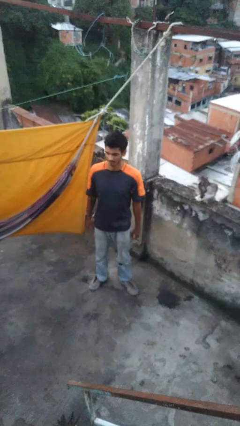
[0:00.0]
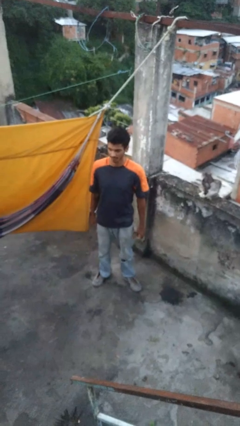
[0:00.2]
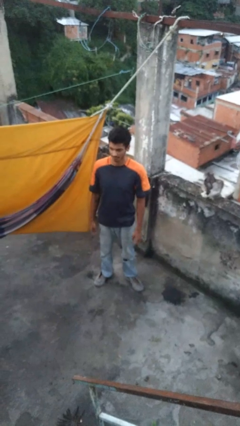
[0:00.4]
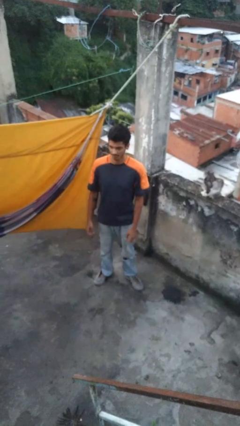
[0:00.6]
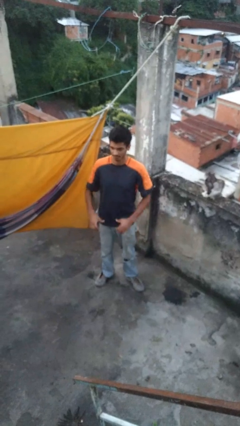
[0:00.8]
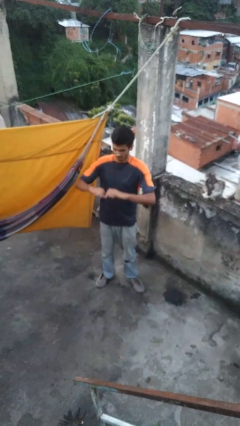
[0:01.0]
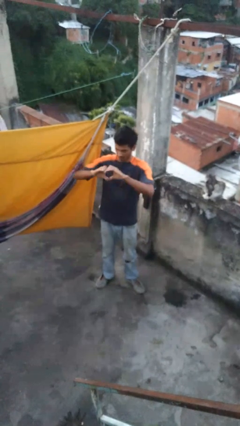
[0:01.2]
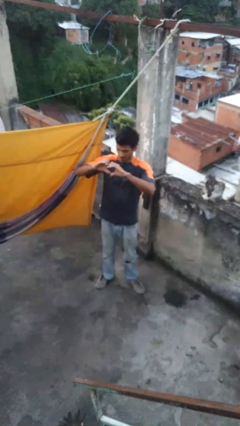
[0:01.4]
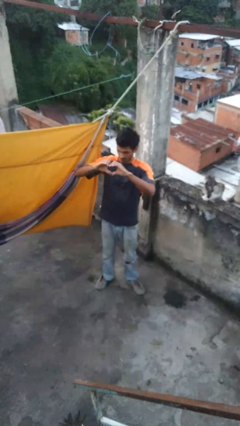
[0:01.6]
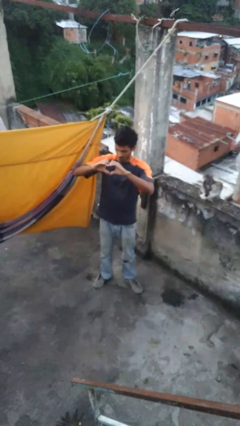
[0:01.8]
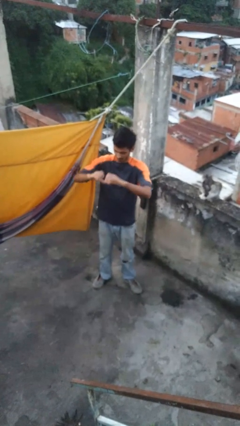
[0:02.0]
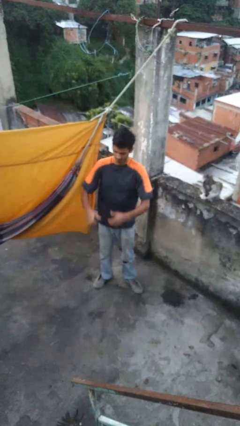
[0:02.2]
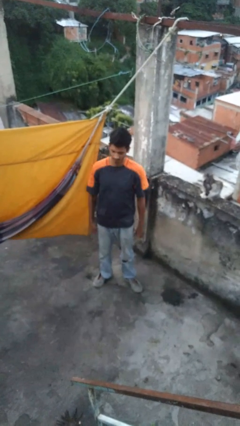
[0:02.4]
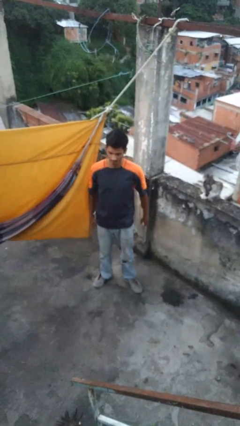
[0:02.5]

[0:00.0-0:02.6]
person gestures heart

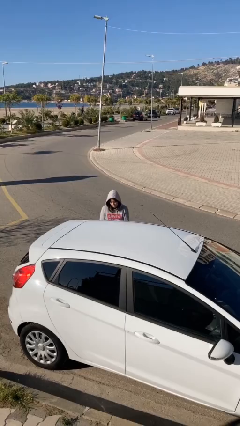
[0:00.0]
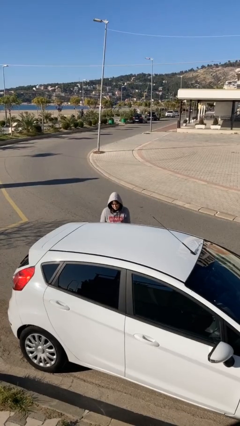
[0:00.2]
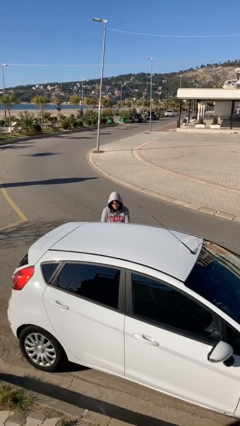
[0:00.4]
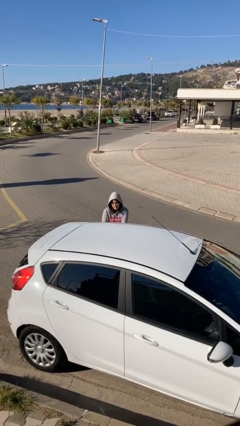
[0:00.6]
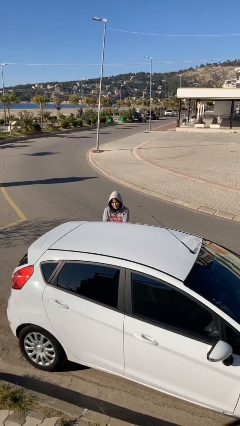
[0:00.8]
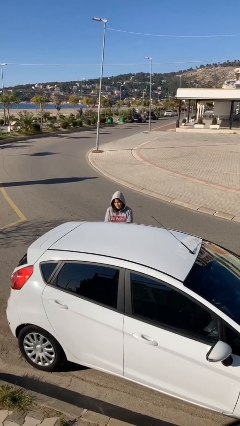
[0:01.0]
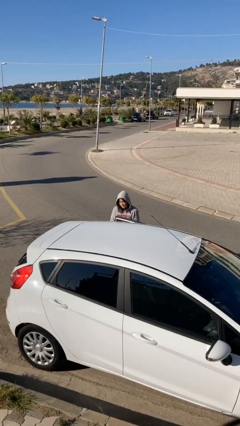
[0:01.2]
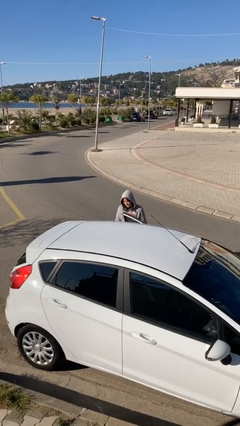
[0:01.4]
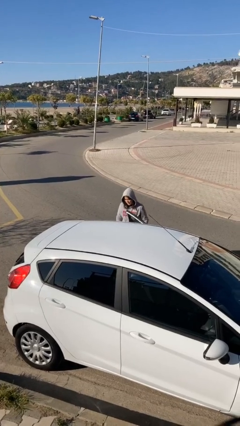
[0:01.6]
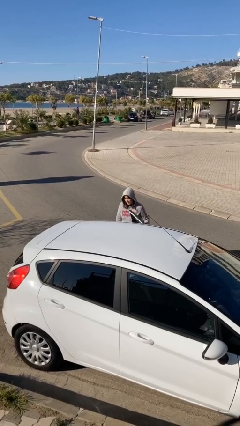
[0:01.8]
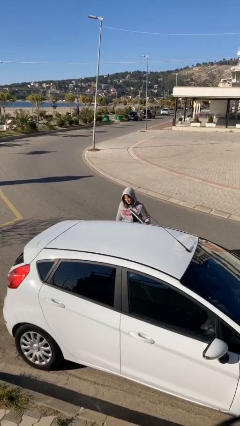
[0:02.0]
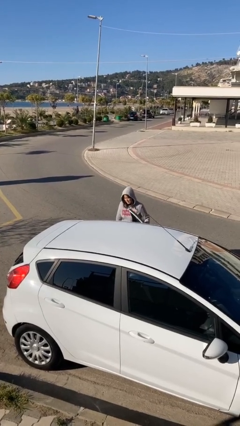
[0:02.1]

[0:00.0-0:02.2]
person opens car door

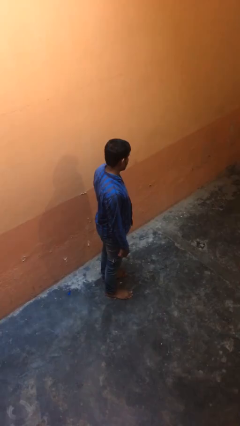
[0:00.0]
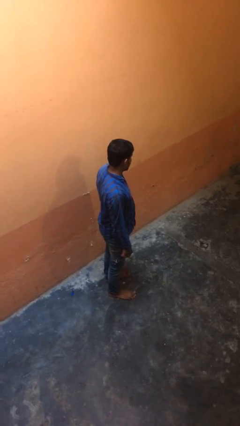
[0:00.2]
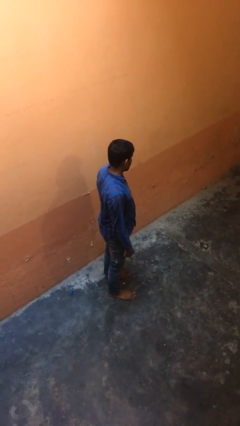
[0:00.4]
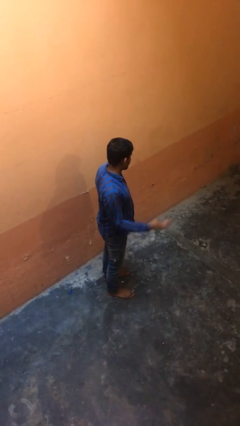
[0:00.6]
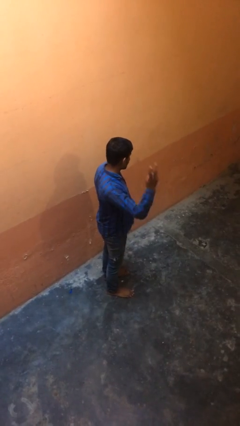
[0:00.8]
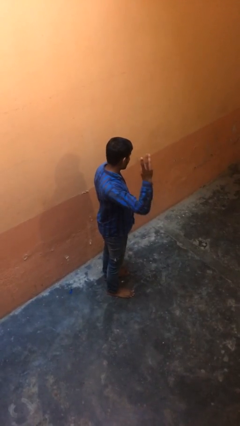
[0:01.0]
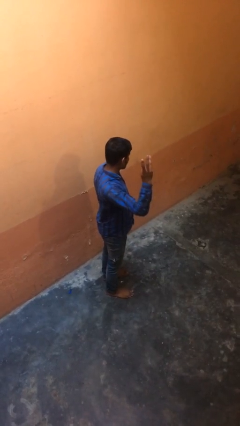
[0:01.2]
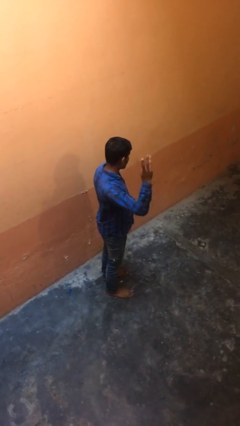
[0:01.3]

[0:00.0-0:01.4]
person gestures number three

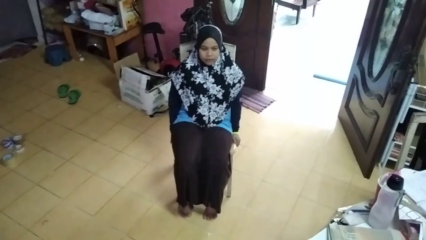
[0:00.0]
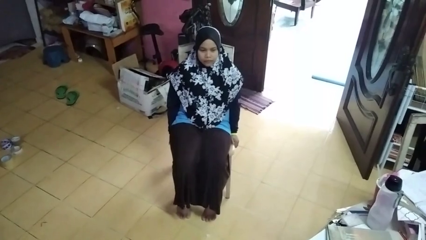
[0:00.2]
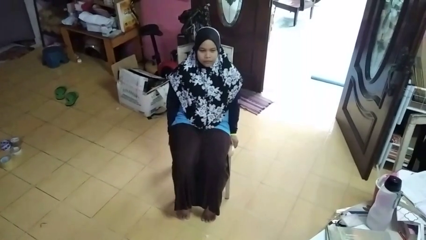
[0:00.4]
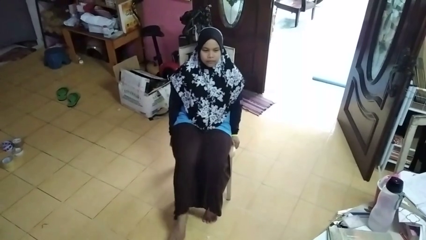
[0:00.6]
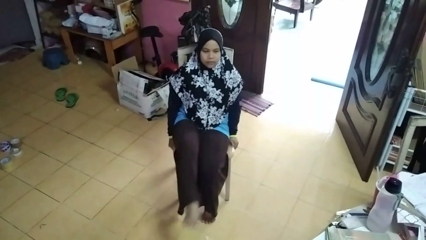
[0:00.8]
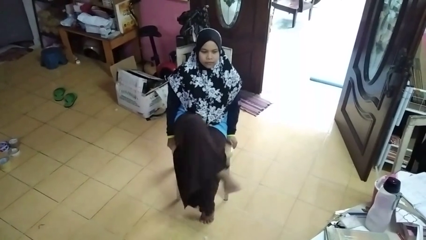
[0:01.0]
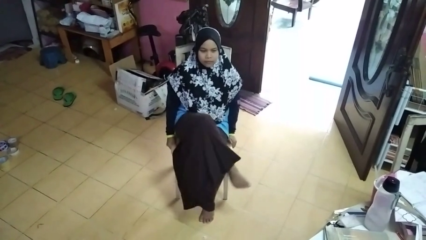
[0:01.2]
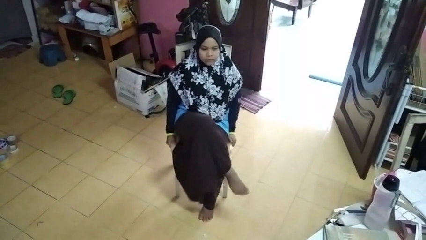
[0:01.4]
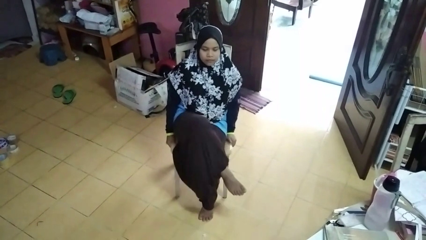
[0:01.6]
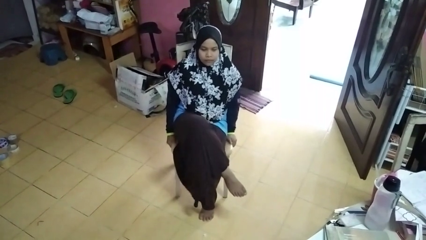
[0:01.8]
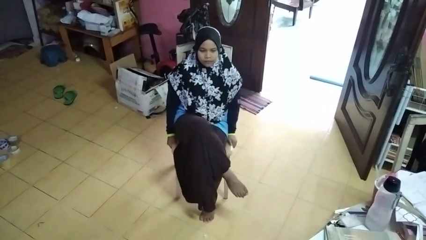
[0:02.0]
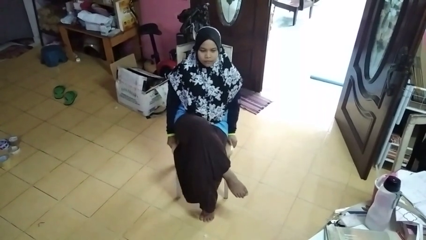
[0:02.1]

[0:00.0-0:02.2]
person crosses legs

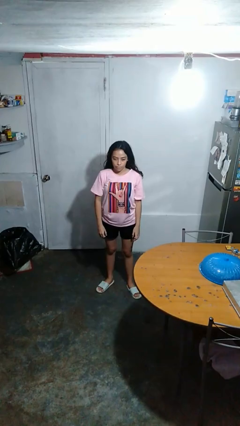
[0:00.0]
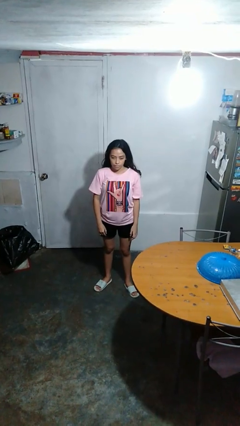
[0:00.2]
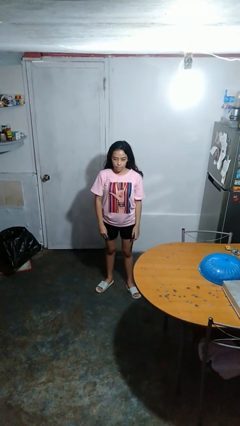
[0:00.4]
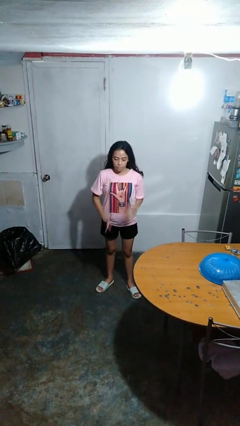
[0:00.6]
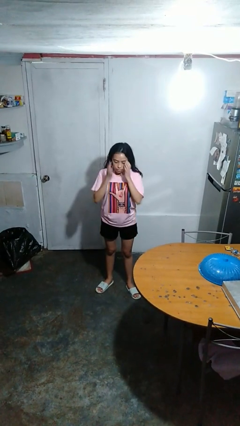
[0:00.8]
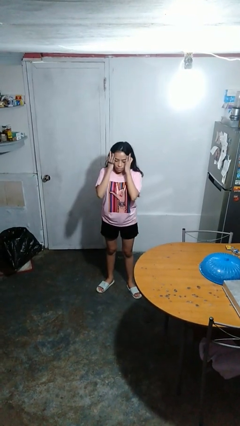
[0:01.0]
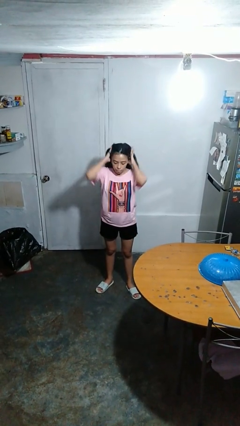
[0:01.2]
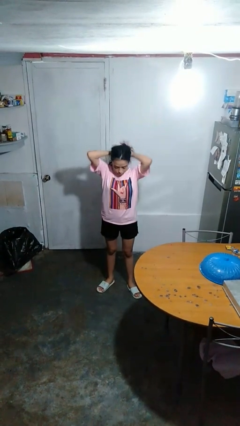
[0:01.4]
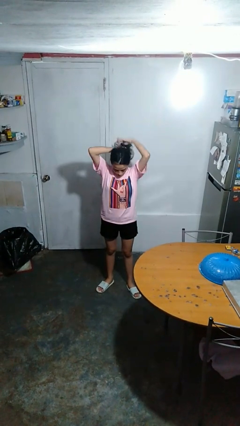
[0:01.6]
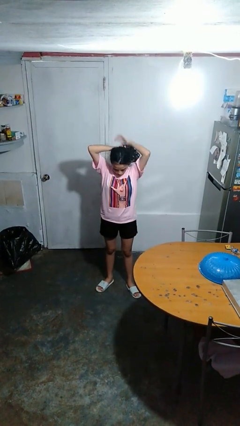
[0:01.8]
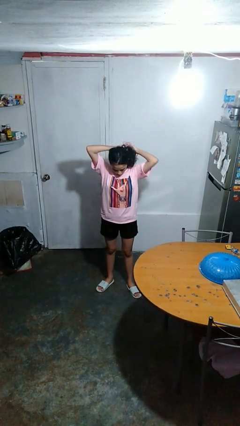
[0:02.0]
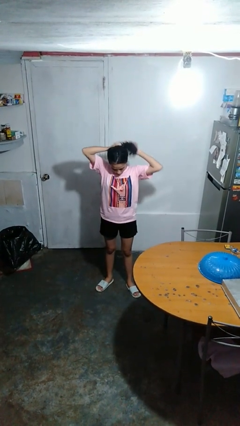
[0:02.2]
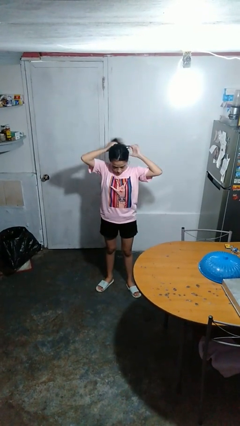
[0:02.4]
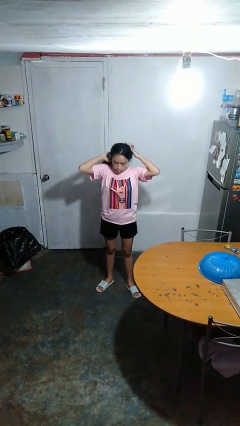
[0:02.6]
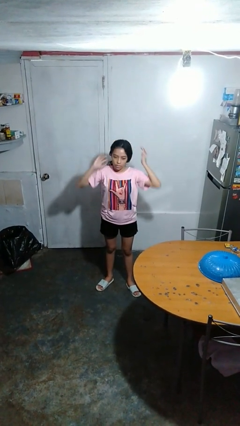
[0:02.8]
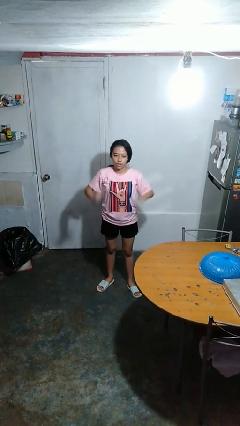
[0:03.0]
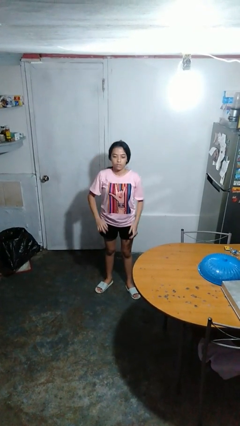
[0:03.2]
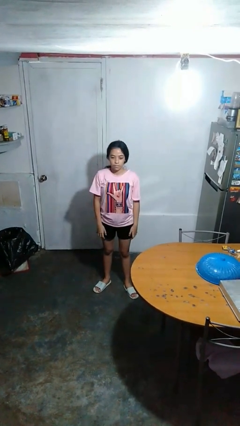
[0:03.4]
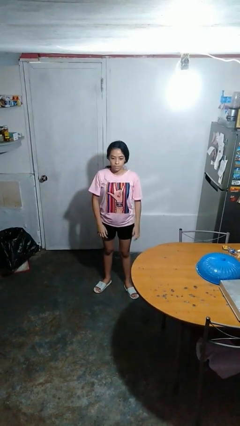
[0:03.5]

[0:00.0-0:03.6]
person puts hair in ponytail

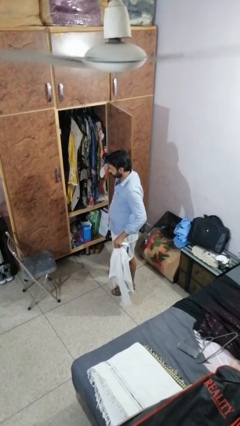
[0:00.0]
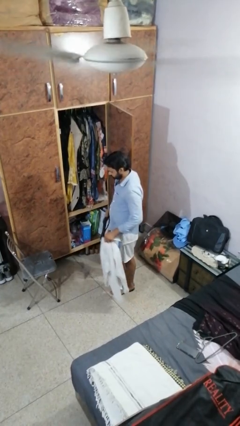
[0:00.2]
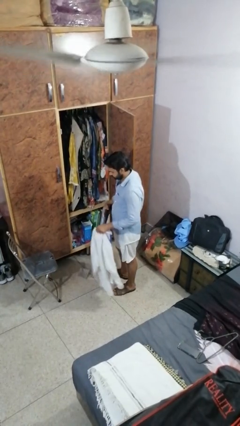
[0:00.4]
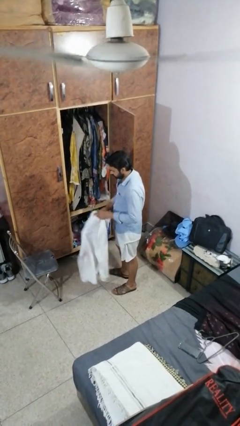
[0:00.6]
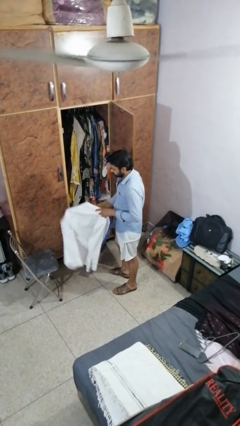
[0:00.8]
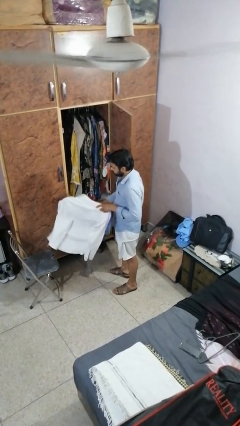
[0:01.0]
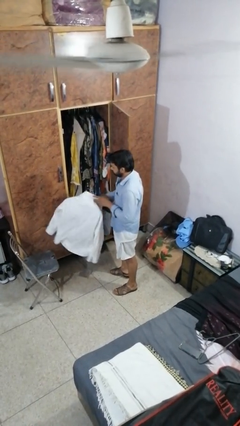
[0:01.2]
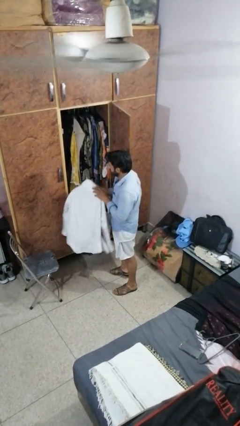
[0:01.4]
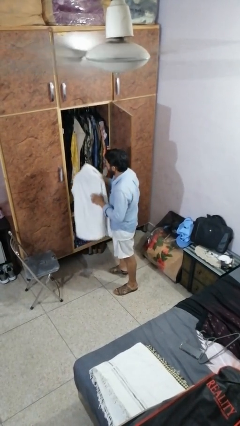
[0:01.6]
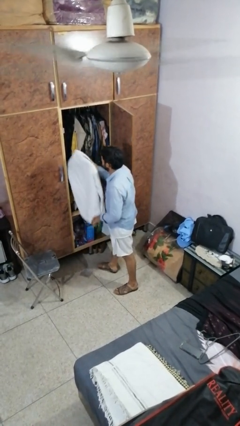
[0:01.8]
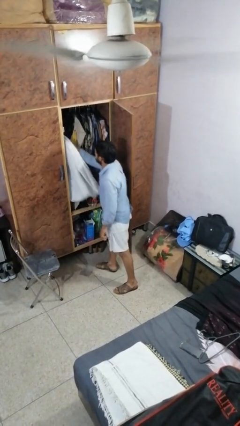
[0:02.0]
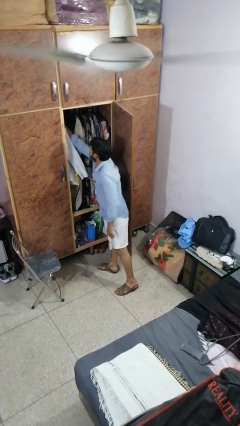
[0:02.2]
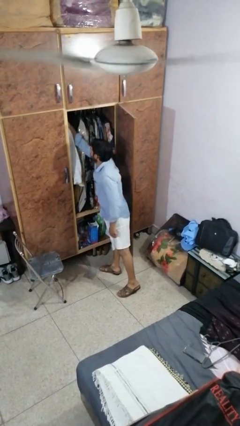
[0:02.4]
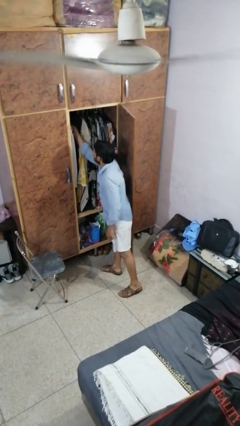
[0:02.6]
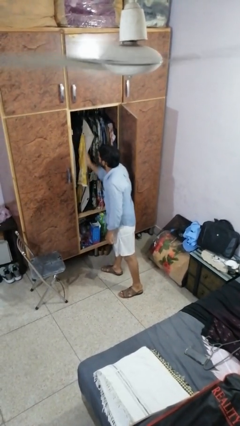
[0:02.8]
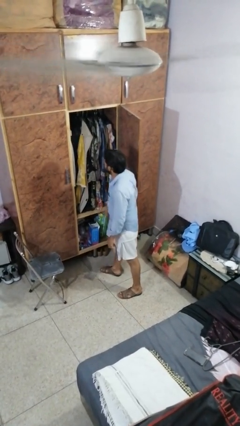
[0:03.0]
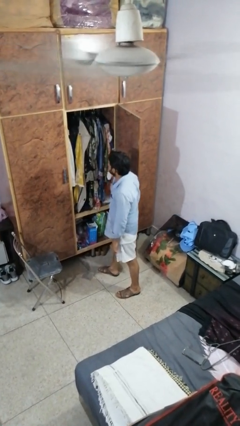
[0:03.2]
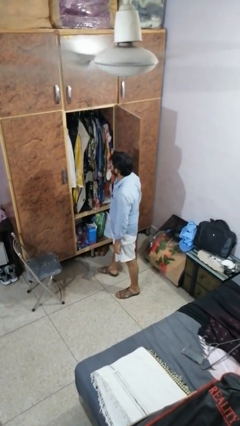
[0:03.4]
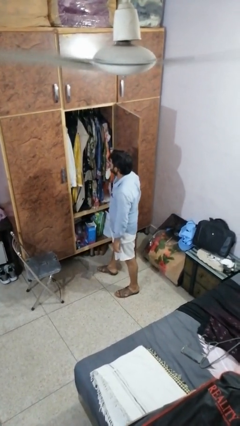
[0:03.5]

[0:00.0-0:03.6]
person puts clothes into closet

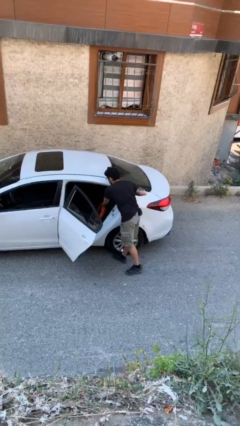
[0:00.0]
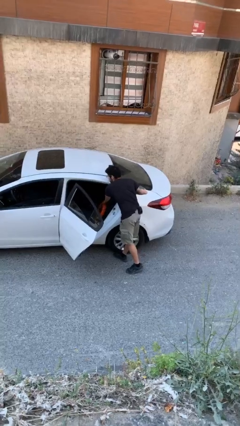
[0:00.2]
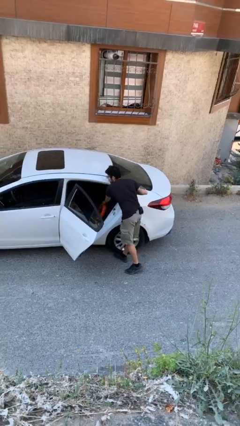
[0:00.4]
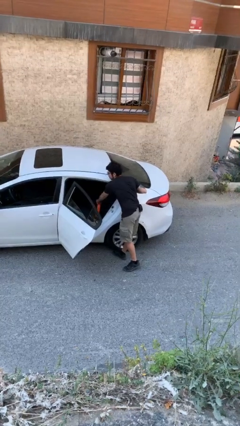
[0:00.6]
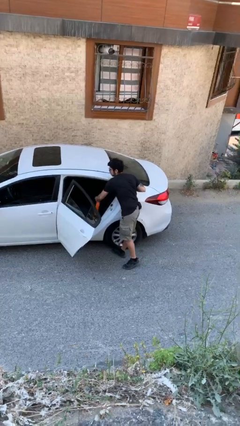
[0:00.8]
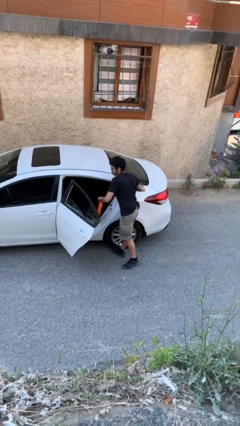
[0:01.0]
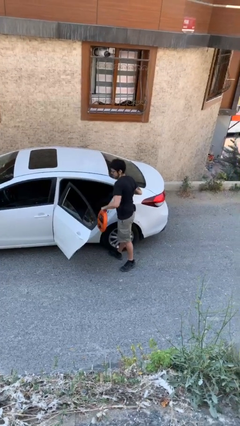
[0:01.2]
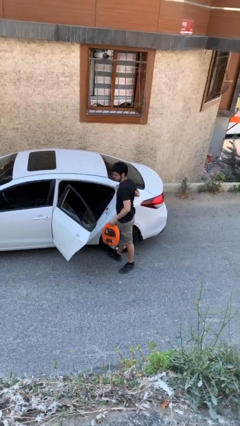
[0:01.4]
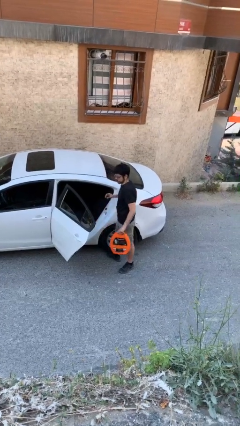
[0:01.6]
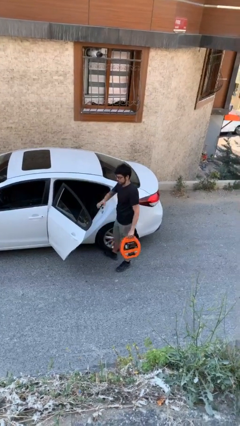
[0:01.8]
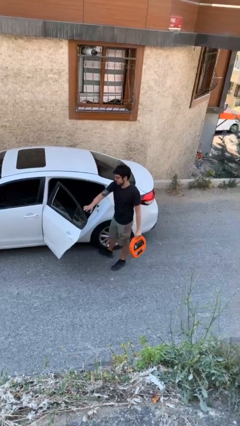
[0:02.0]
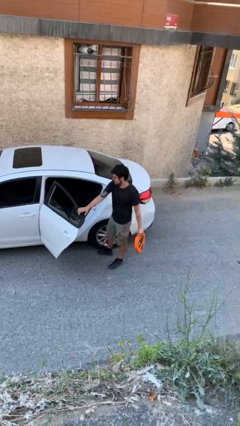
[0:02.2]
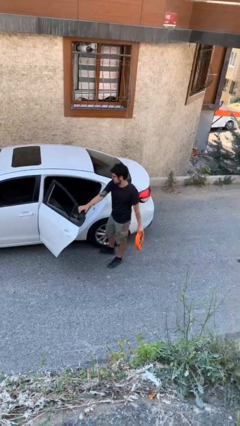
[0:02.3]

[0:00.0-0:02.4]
person unloads car
